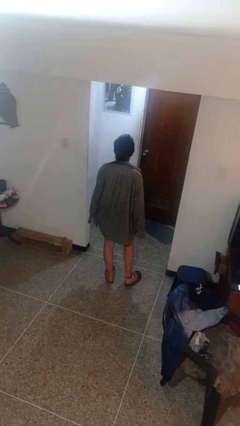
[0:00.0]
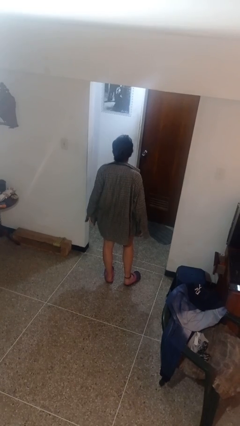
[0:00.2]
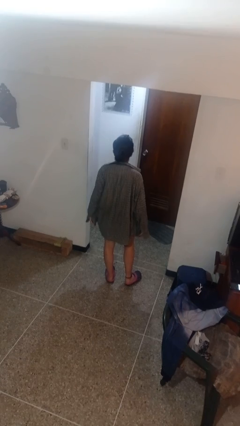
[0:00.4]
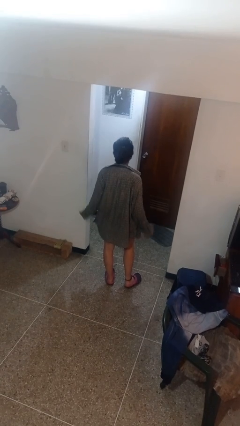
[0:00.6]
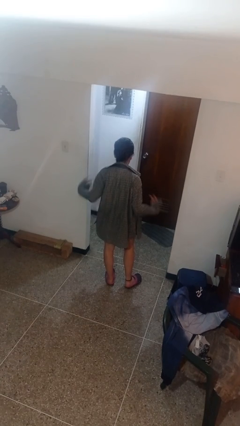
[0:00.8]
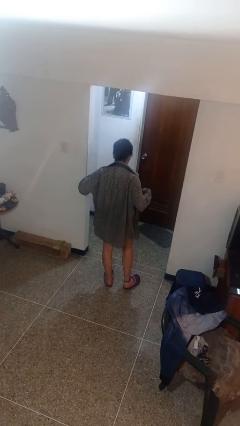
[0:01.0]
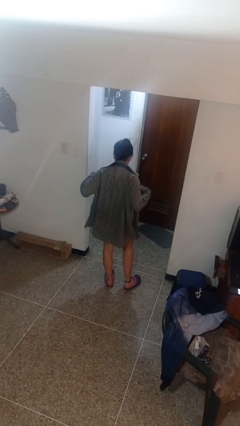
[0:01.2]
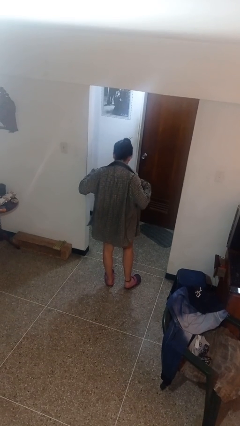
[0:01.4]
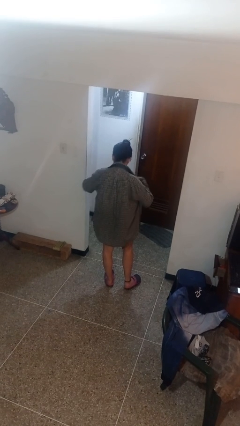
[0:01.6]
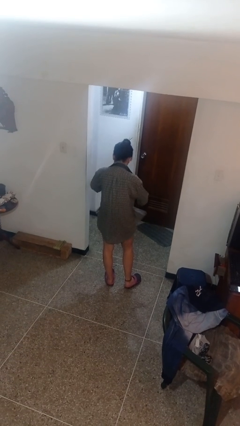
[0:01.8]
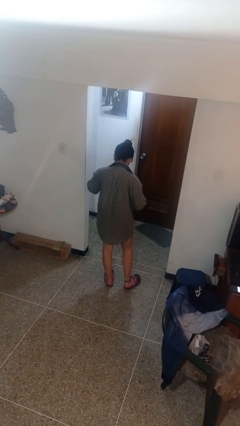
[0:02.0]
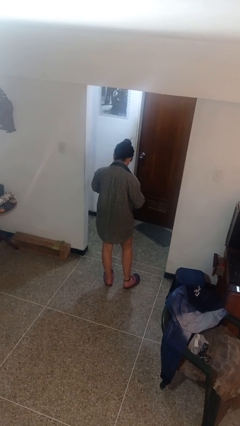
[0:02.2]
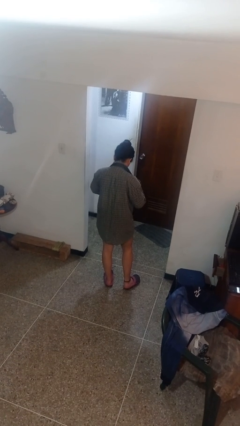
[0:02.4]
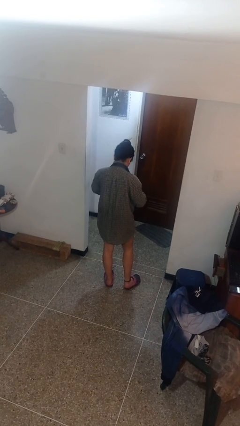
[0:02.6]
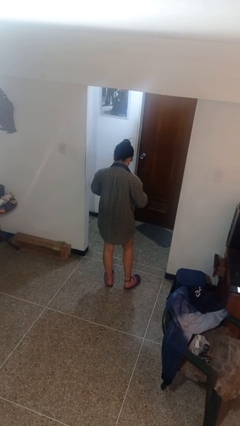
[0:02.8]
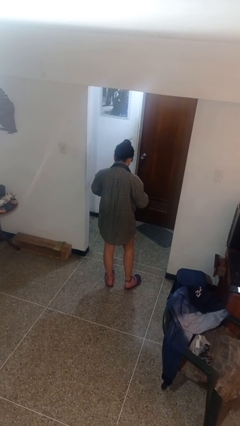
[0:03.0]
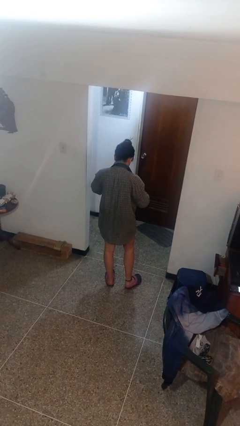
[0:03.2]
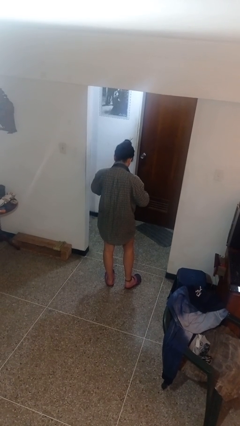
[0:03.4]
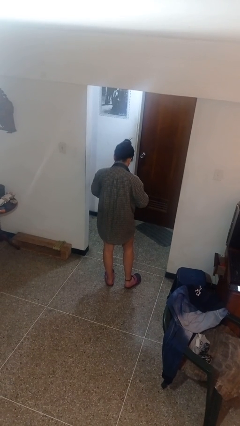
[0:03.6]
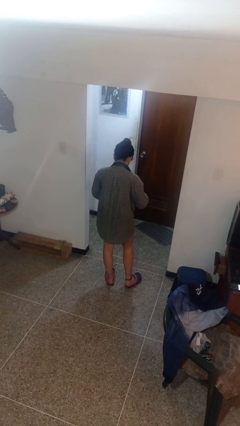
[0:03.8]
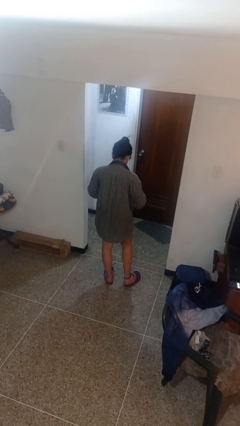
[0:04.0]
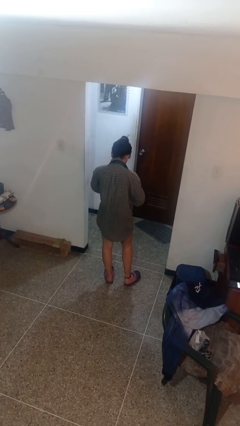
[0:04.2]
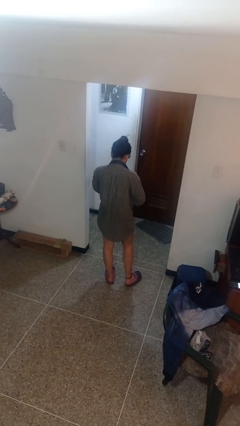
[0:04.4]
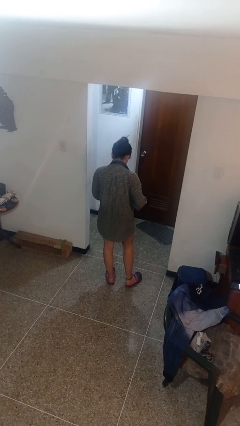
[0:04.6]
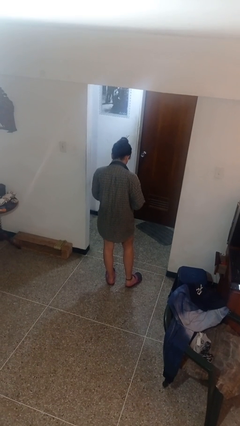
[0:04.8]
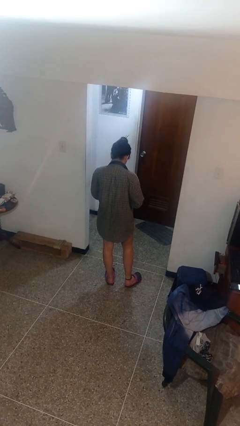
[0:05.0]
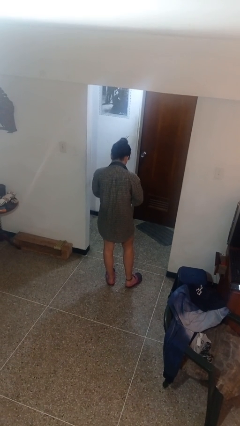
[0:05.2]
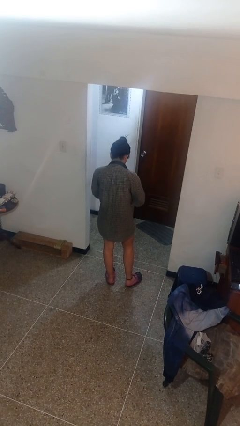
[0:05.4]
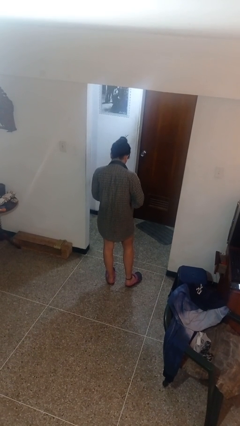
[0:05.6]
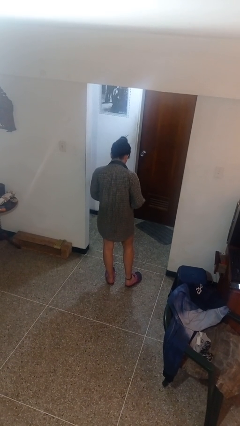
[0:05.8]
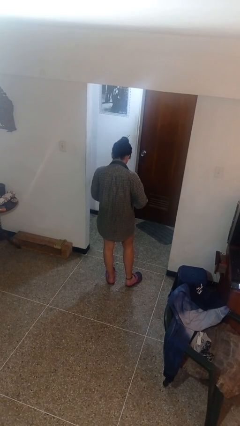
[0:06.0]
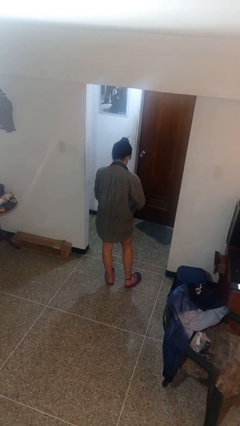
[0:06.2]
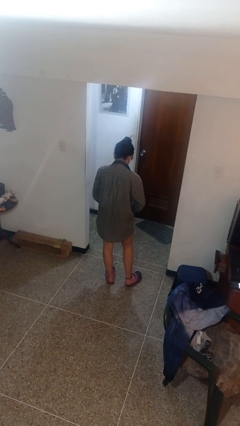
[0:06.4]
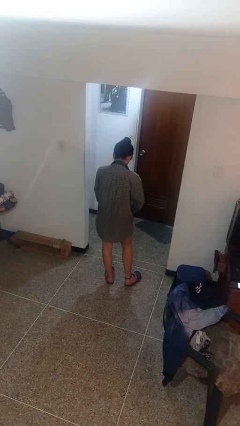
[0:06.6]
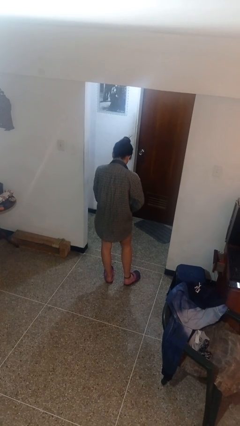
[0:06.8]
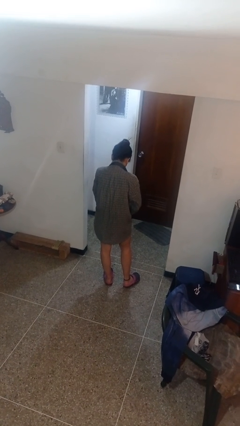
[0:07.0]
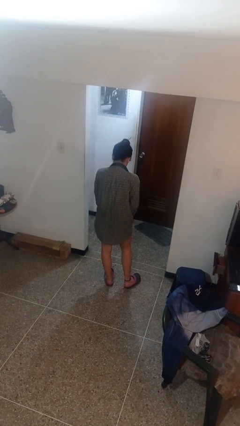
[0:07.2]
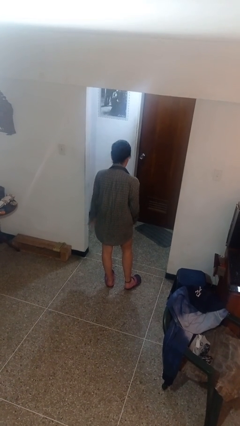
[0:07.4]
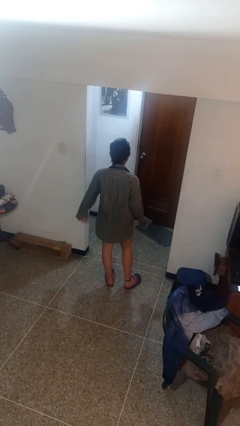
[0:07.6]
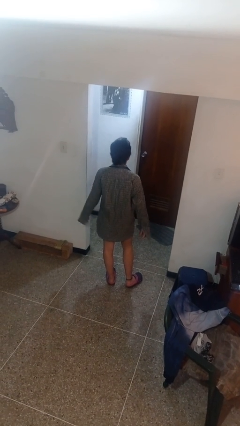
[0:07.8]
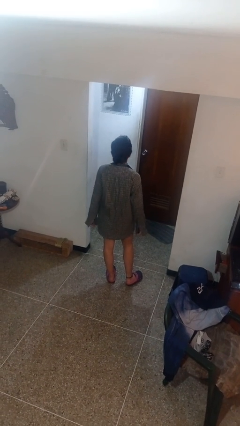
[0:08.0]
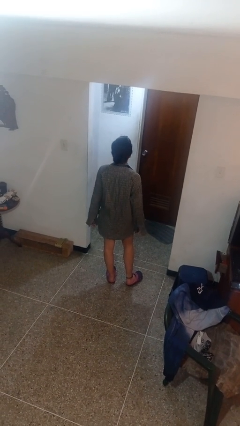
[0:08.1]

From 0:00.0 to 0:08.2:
person buttons shirt

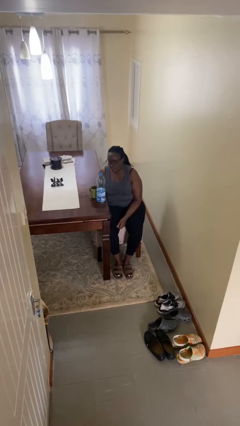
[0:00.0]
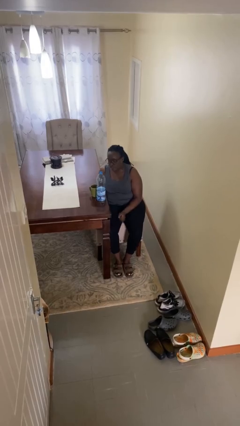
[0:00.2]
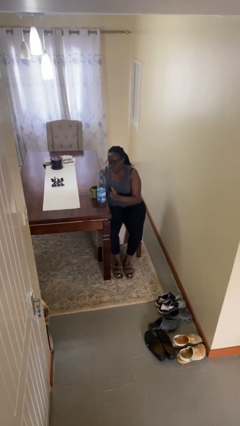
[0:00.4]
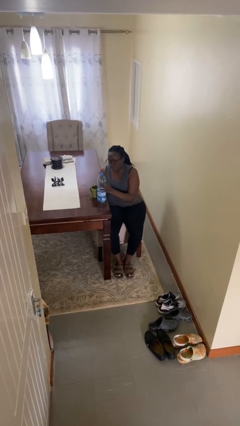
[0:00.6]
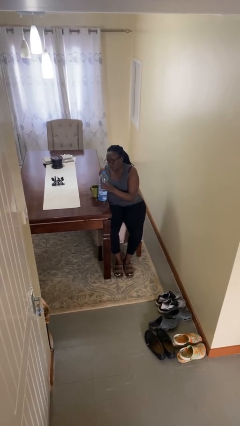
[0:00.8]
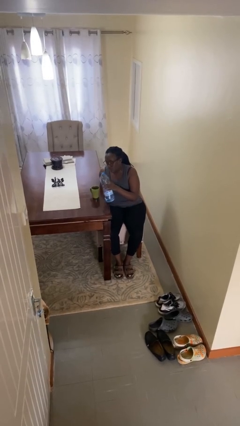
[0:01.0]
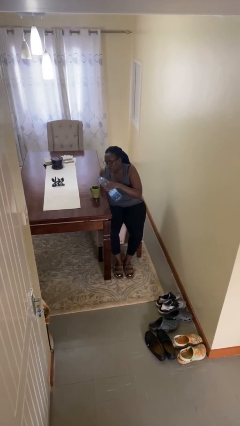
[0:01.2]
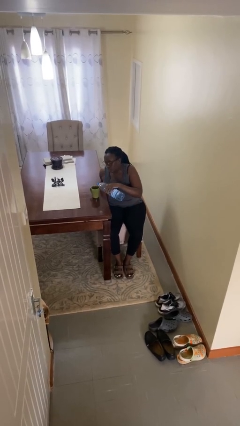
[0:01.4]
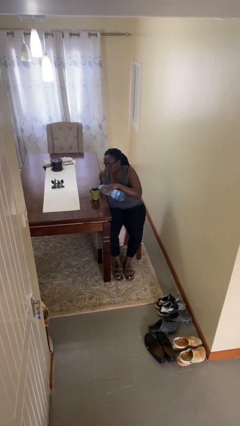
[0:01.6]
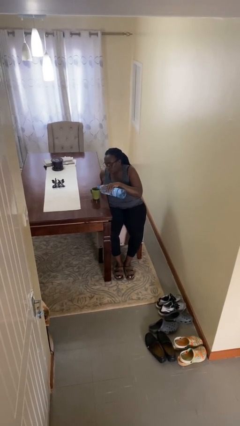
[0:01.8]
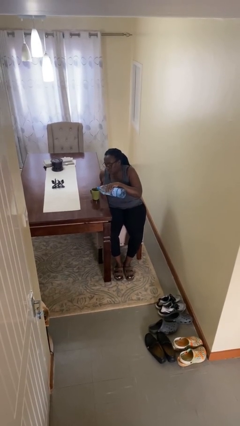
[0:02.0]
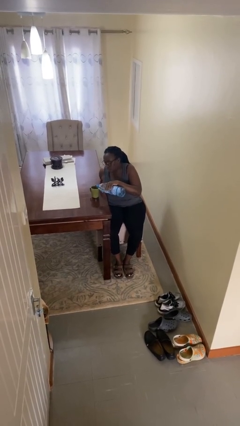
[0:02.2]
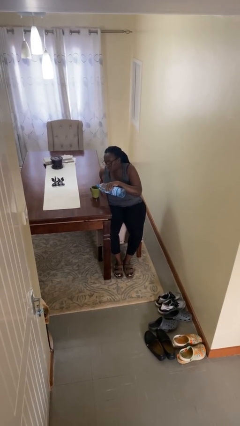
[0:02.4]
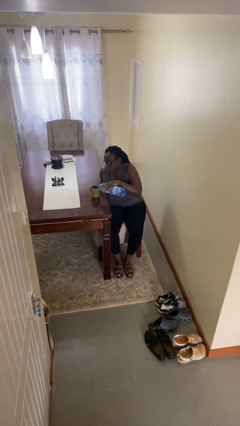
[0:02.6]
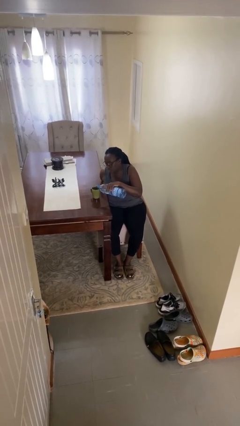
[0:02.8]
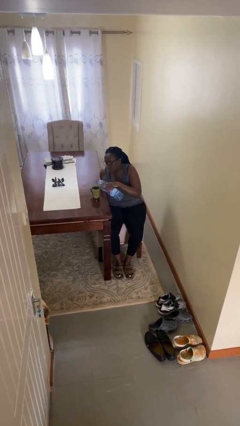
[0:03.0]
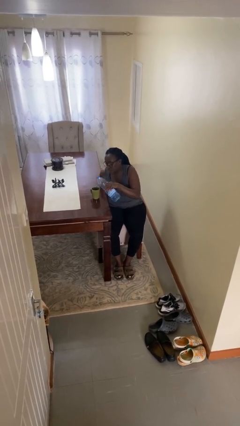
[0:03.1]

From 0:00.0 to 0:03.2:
person pours liquid into cup

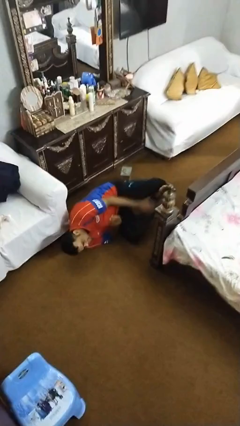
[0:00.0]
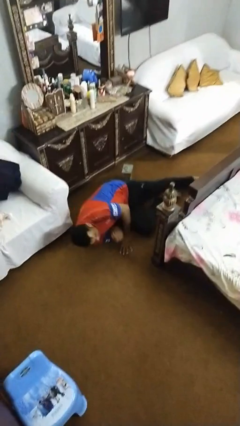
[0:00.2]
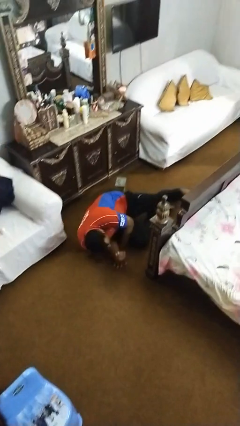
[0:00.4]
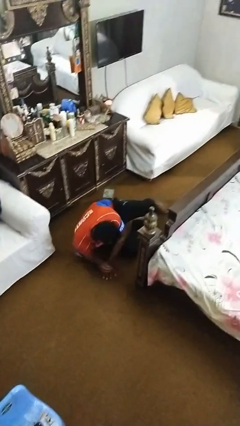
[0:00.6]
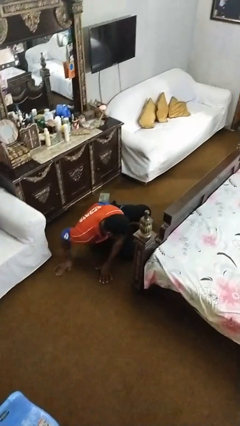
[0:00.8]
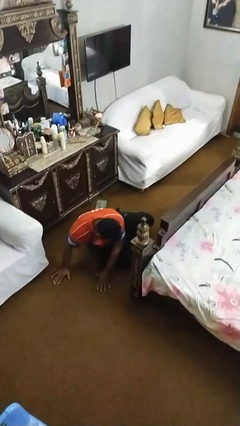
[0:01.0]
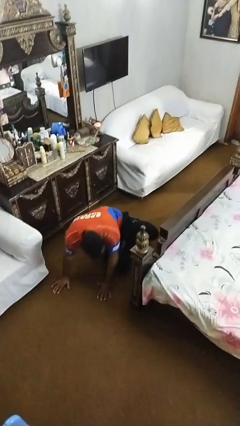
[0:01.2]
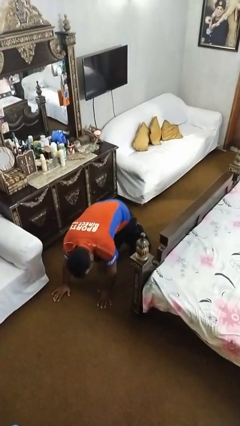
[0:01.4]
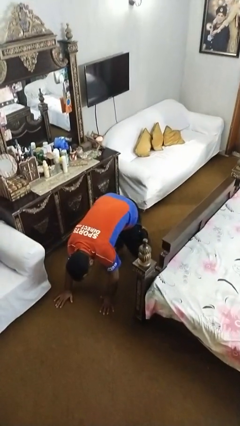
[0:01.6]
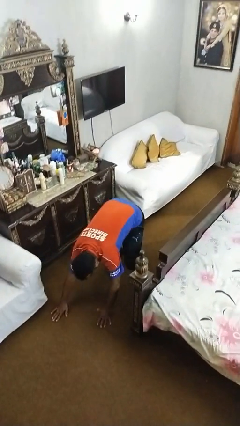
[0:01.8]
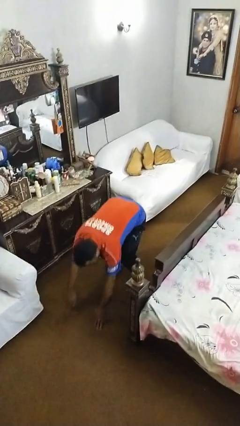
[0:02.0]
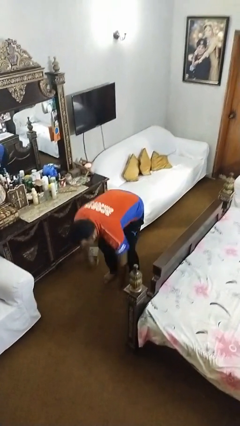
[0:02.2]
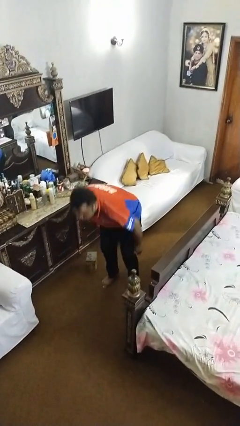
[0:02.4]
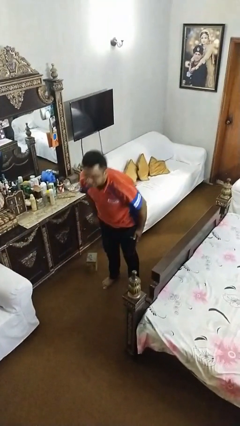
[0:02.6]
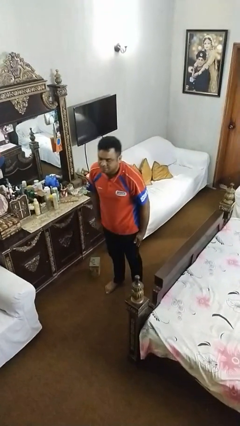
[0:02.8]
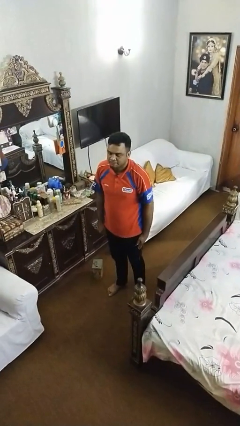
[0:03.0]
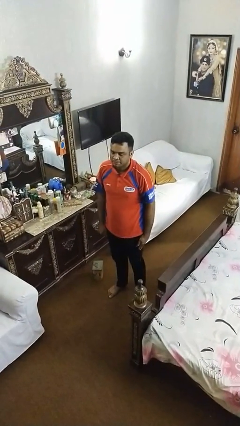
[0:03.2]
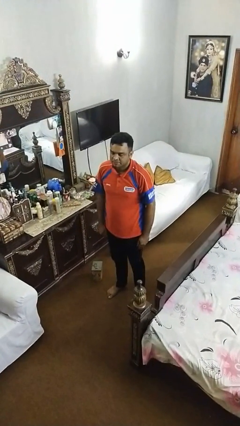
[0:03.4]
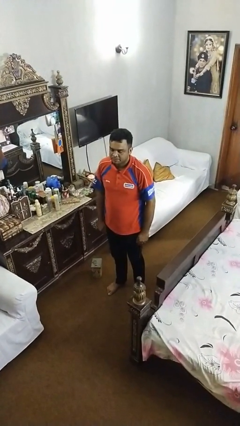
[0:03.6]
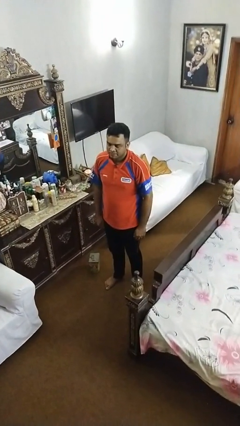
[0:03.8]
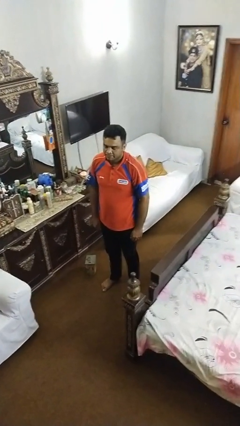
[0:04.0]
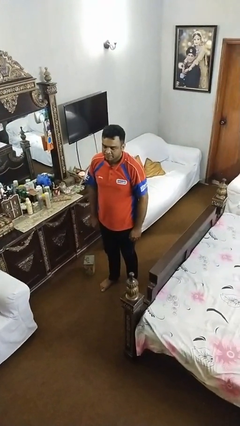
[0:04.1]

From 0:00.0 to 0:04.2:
person stands up from floor

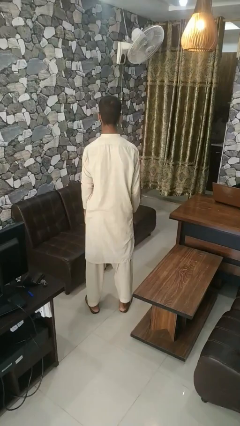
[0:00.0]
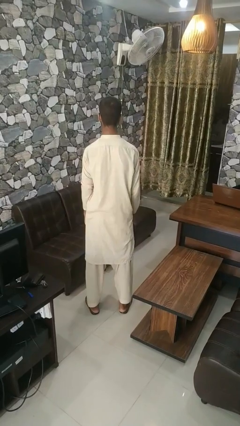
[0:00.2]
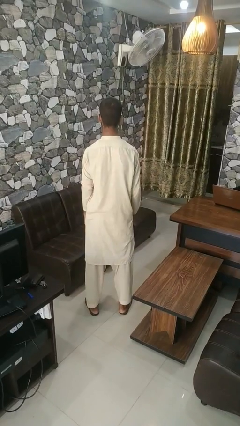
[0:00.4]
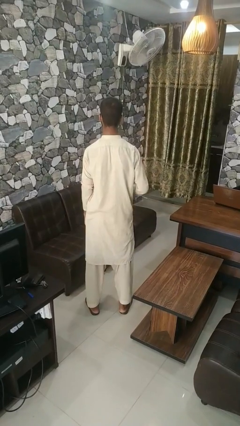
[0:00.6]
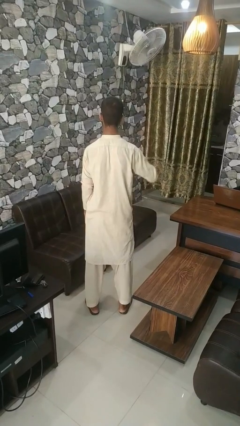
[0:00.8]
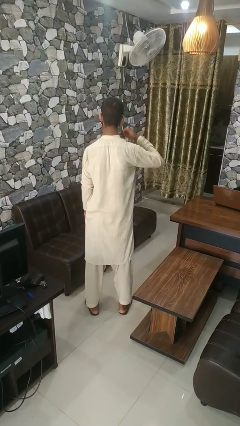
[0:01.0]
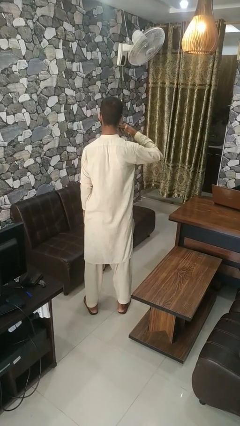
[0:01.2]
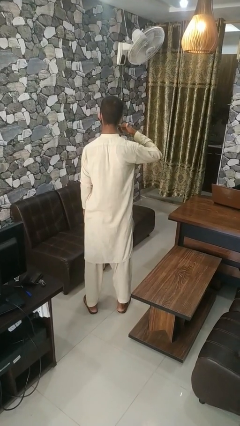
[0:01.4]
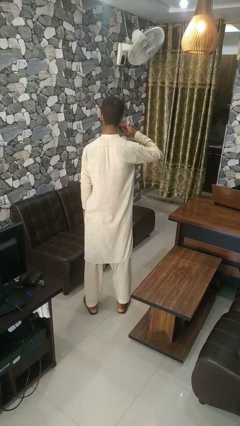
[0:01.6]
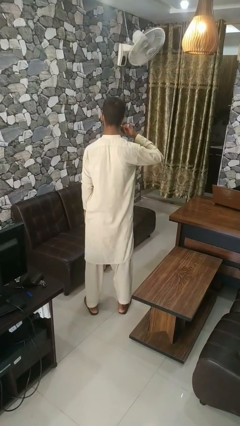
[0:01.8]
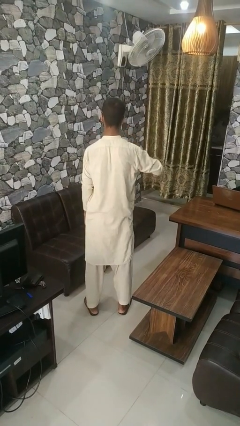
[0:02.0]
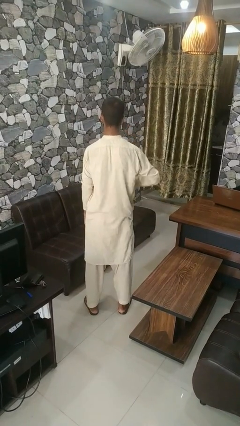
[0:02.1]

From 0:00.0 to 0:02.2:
person gestures call me

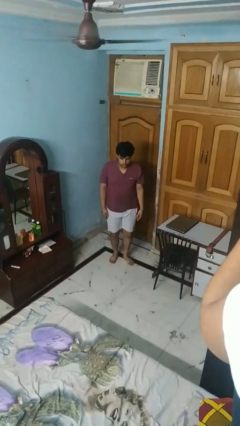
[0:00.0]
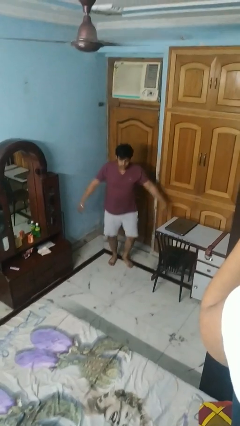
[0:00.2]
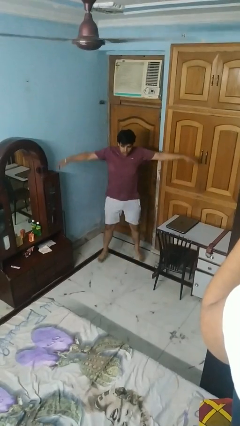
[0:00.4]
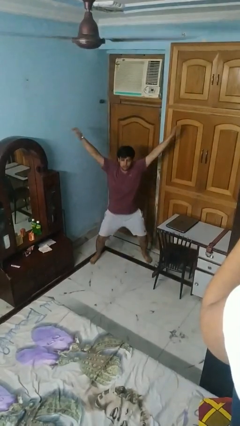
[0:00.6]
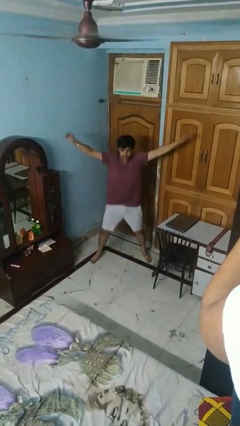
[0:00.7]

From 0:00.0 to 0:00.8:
person exercises with jumping jacks
